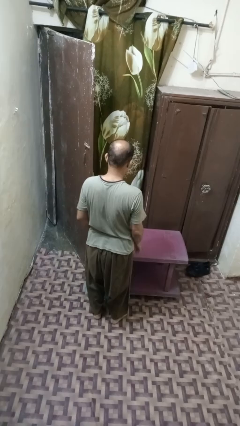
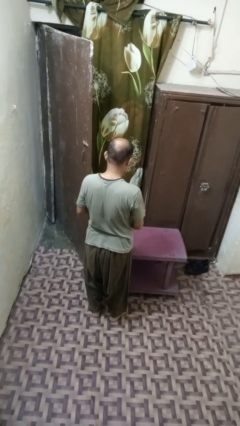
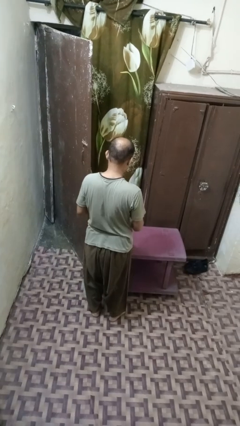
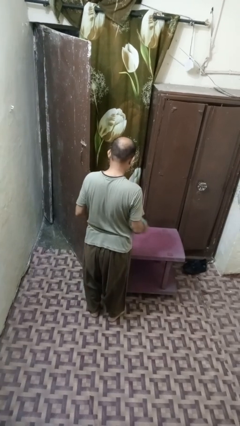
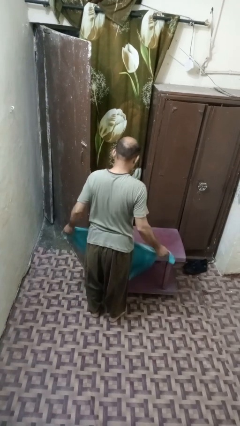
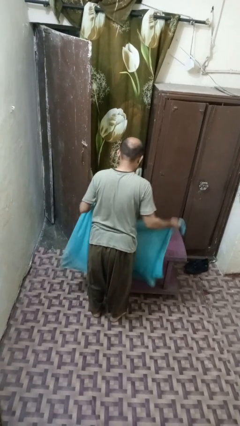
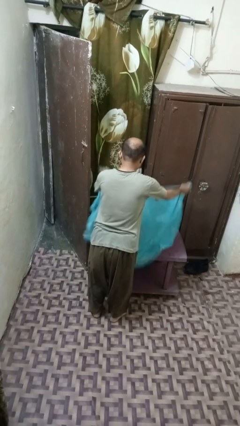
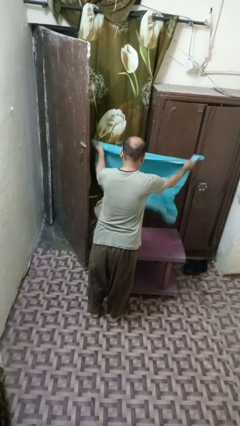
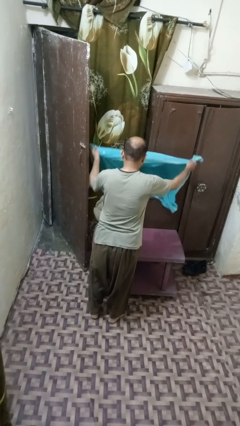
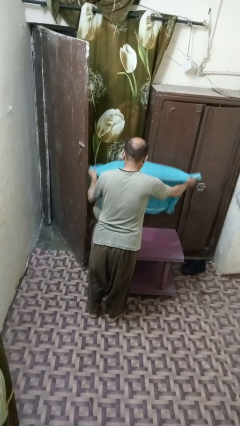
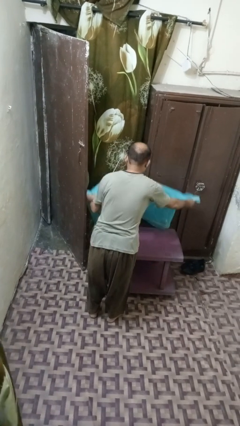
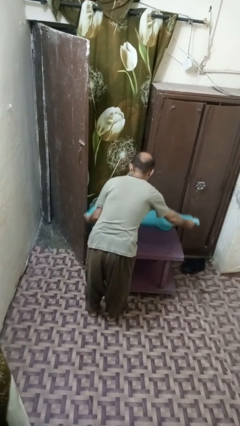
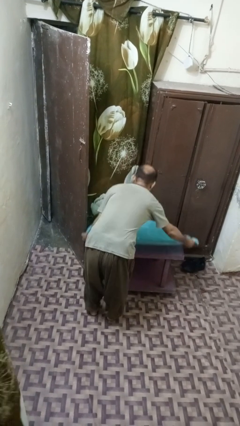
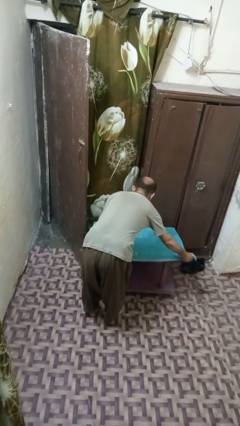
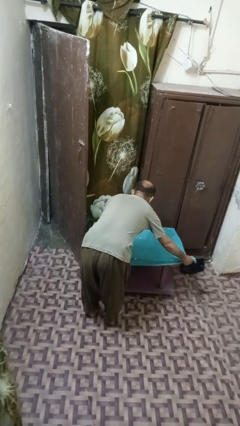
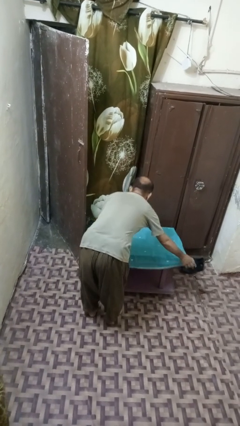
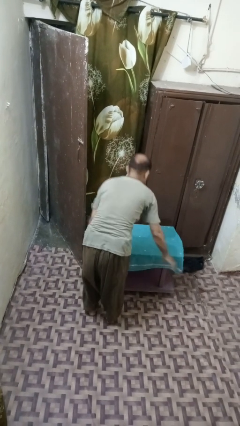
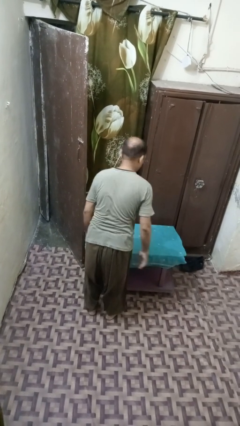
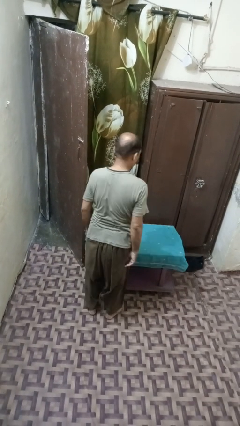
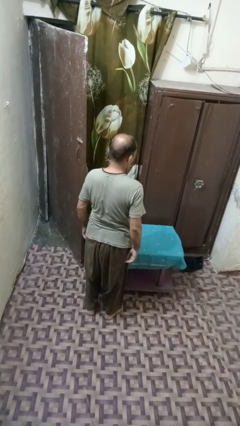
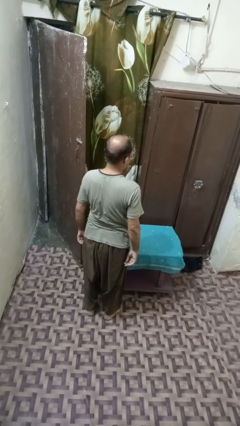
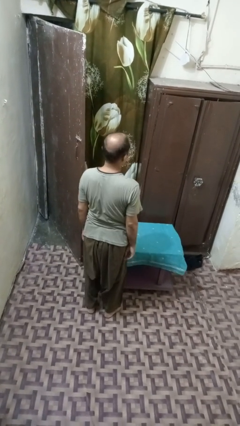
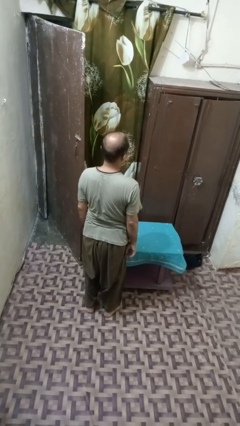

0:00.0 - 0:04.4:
person spreads tablecloth

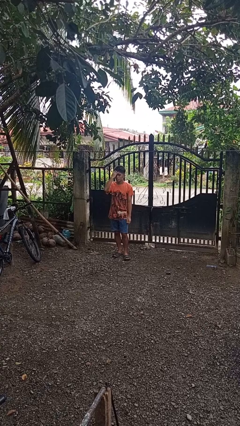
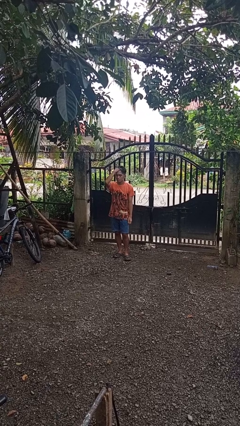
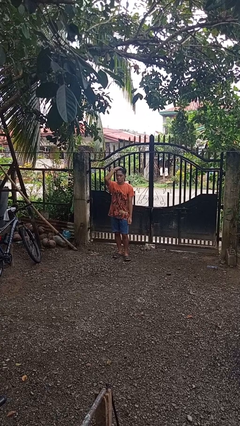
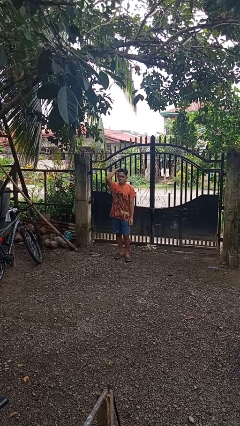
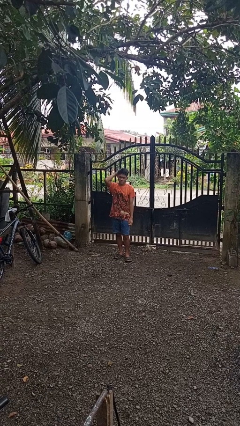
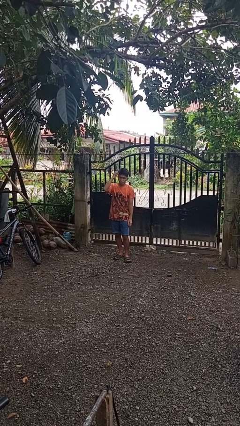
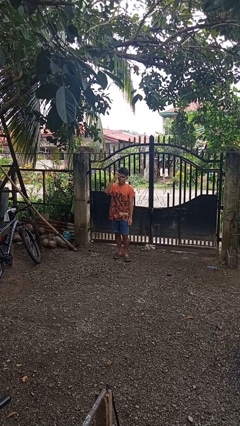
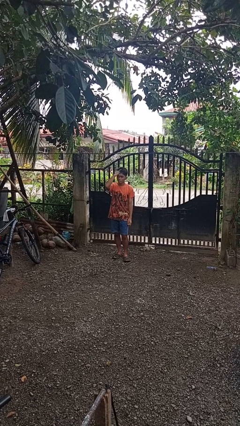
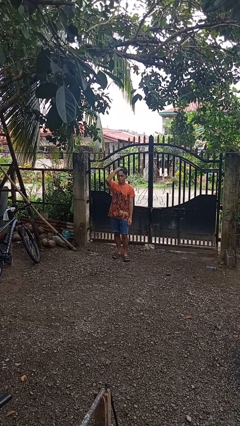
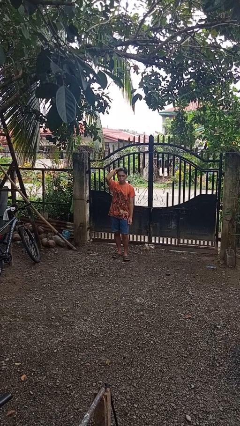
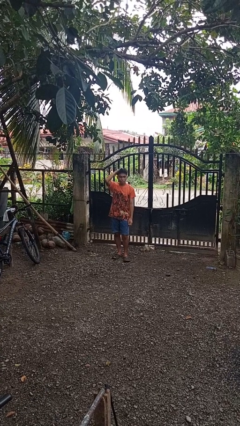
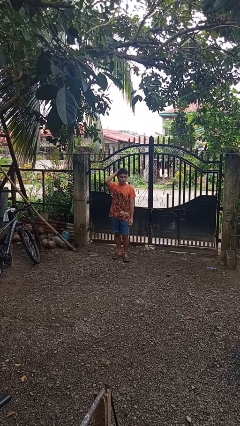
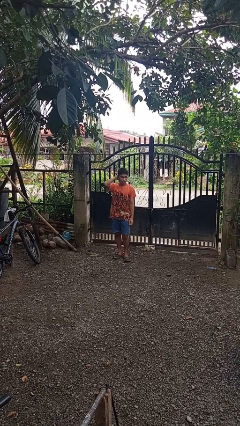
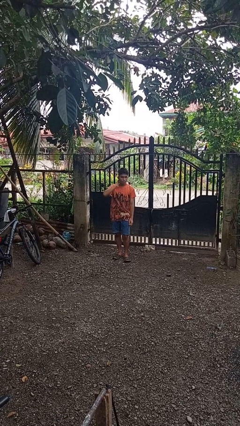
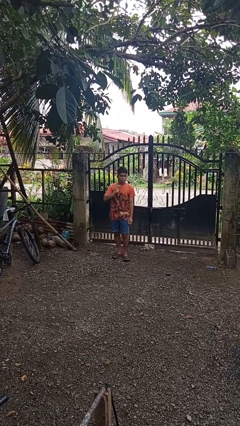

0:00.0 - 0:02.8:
person strokes hair

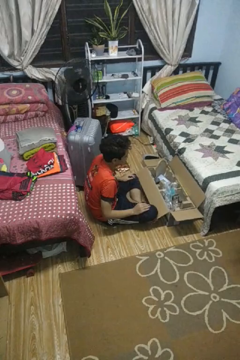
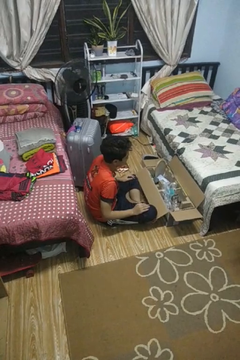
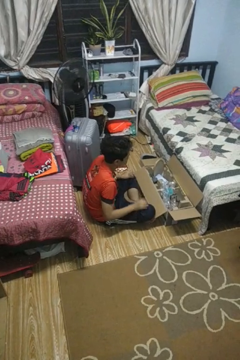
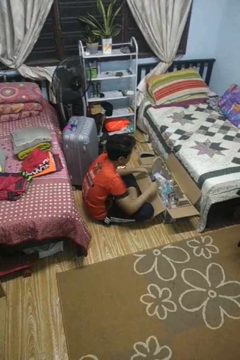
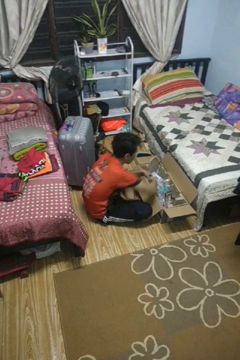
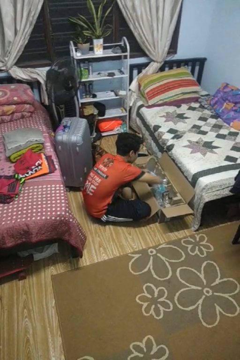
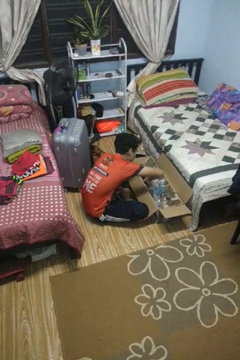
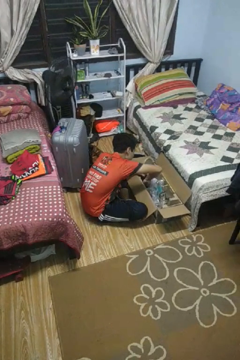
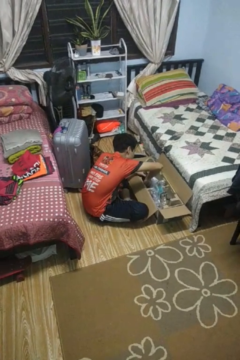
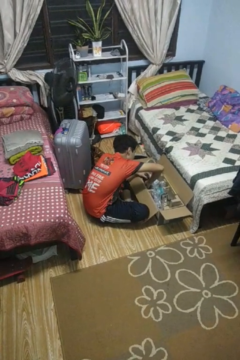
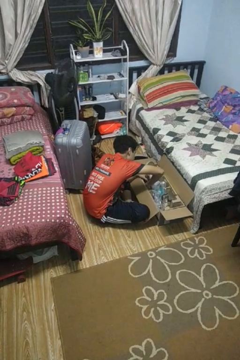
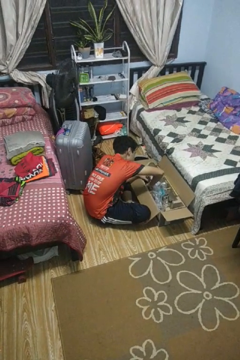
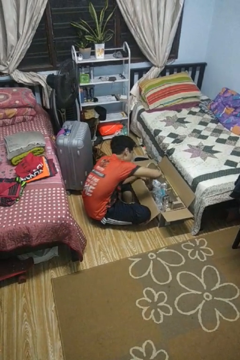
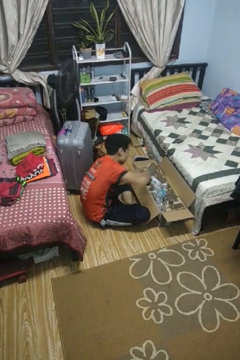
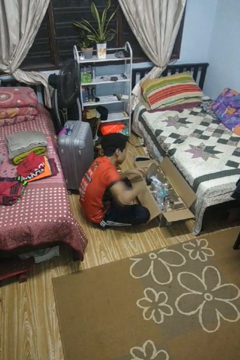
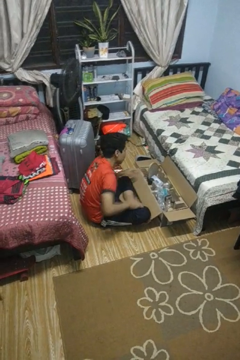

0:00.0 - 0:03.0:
person searches in box

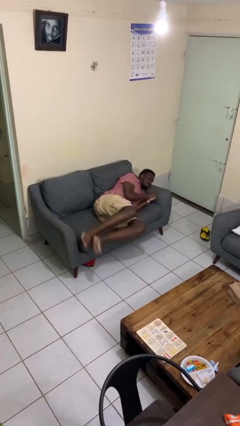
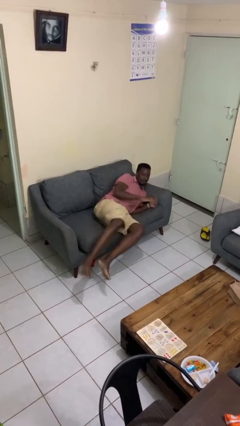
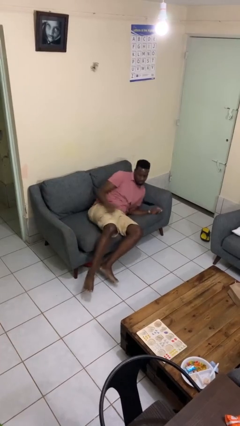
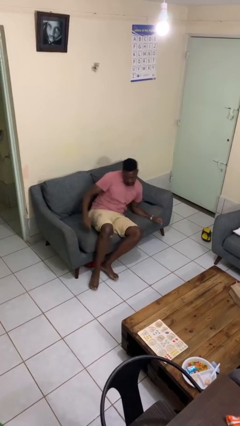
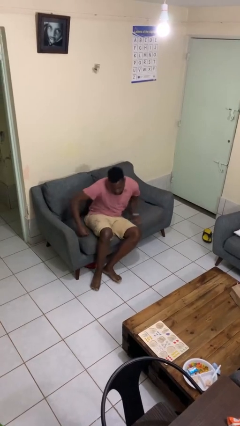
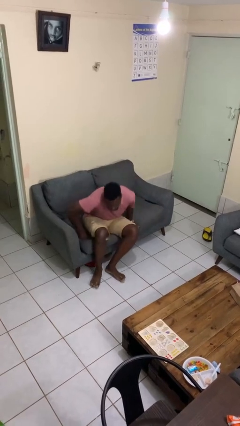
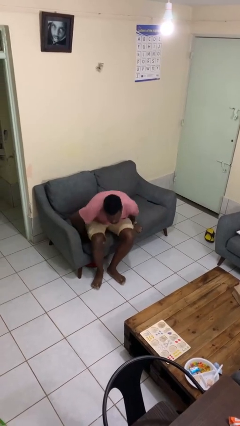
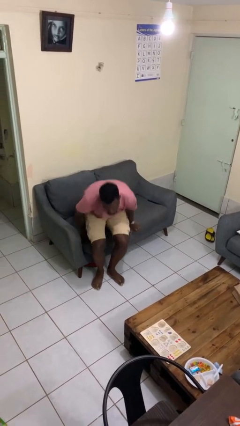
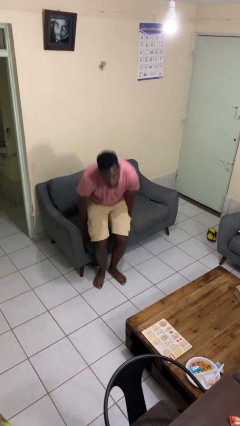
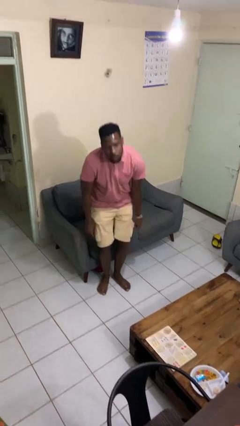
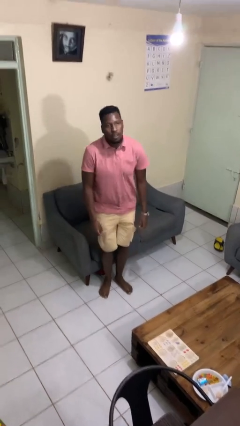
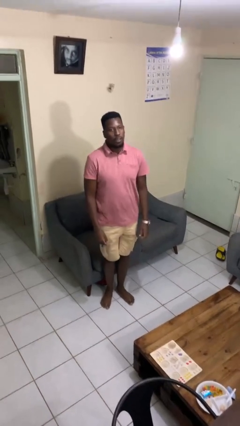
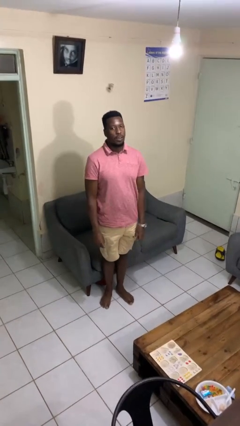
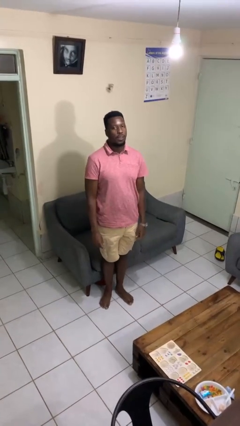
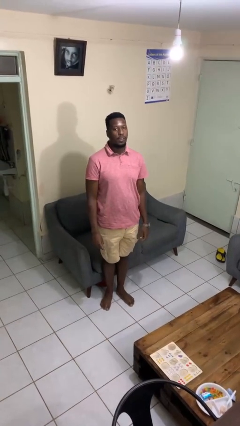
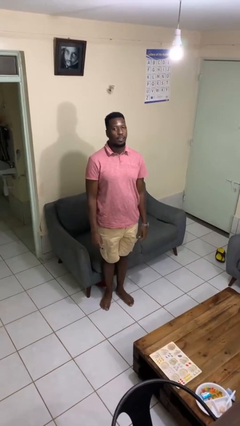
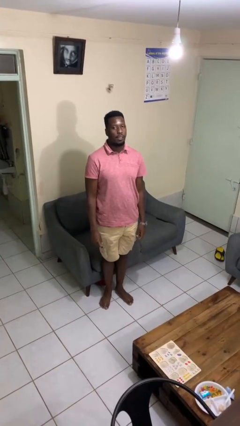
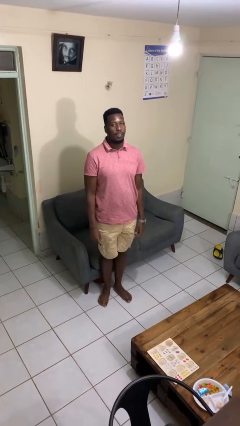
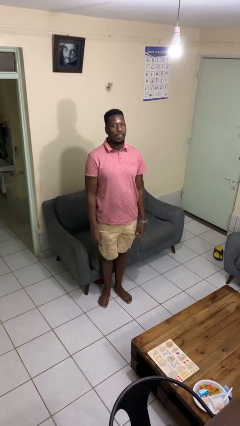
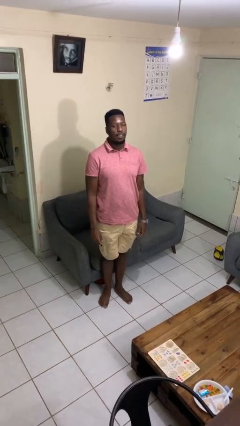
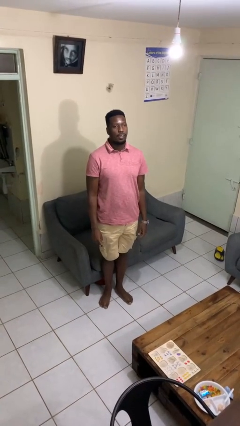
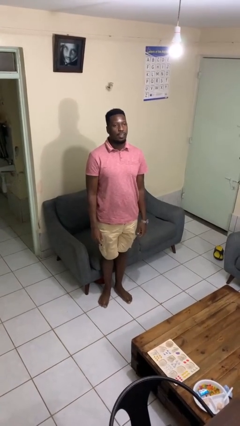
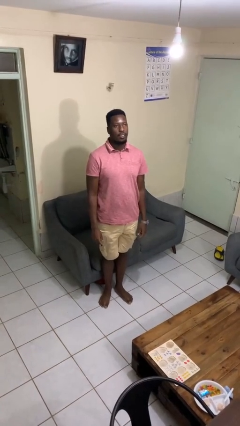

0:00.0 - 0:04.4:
person stands up

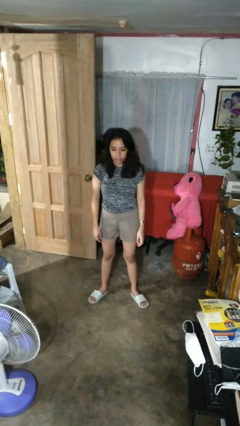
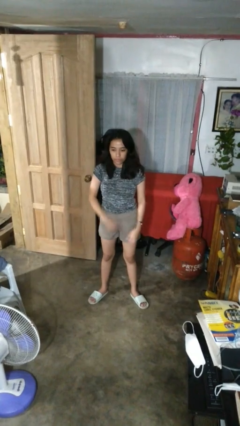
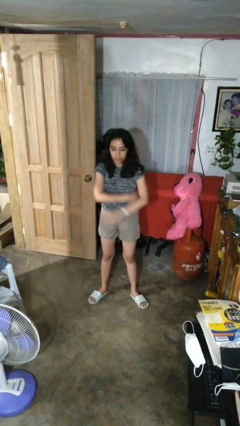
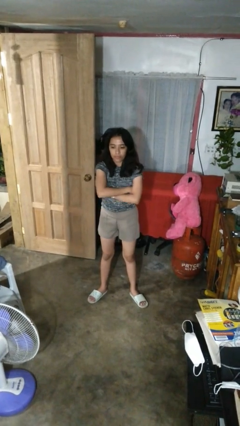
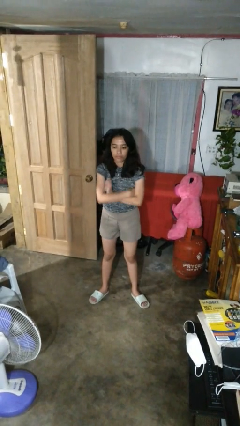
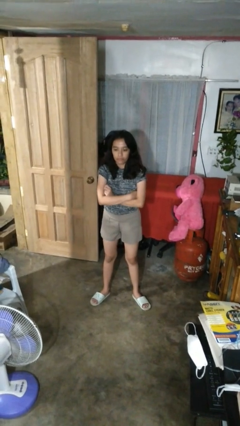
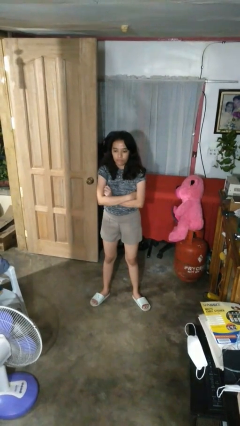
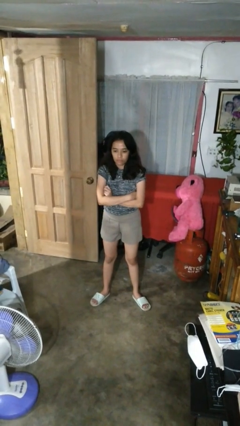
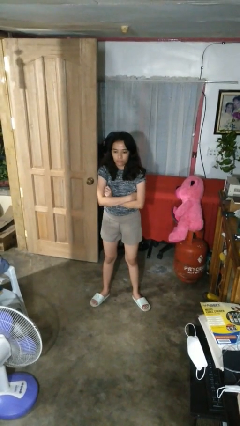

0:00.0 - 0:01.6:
person crosses arms

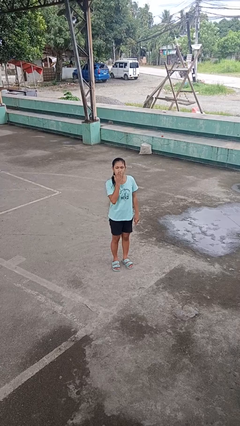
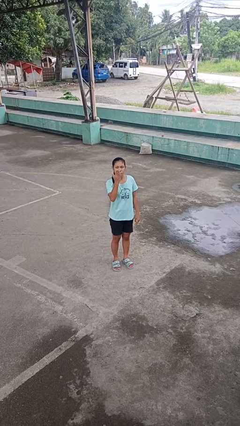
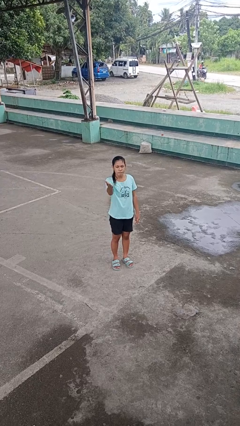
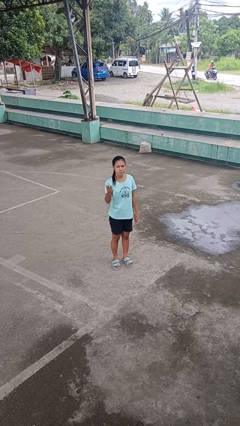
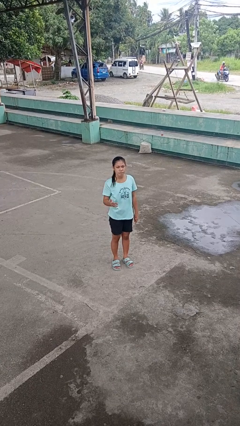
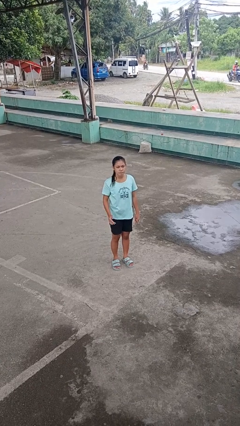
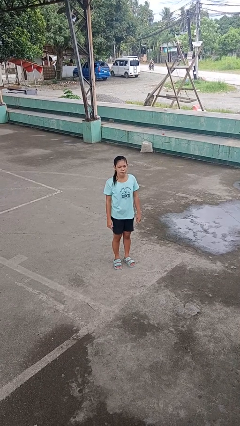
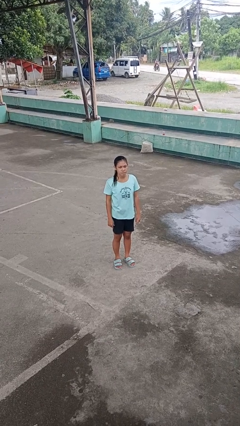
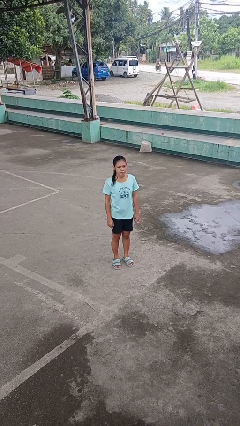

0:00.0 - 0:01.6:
person gestures blow kiss
